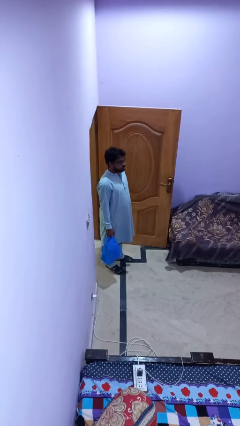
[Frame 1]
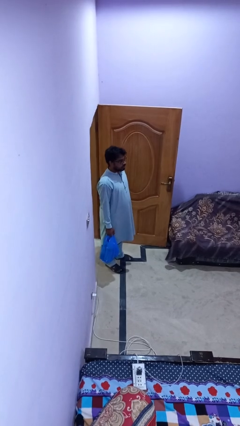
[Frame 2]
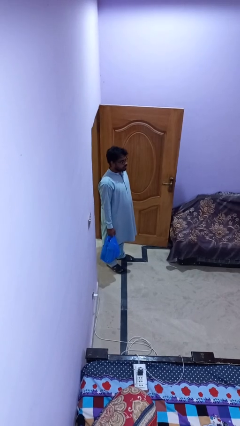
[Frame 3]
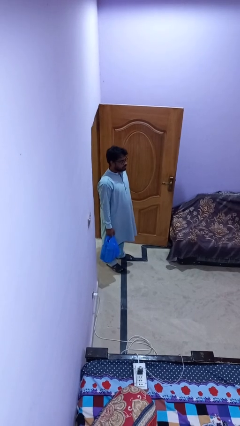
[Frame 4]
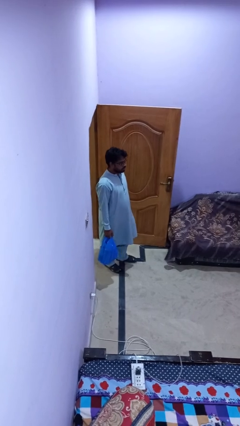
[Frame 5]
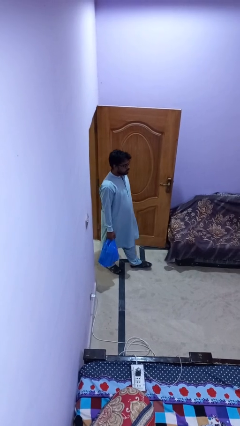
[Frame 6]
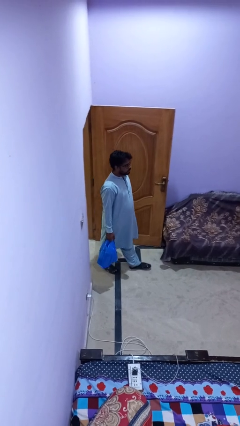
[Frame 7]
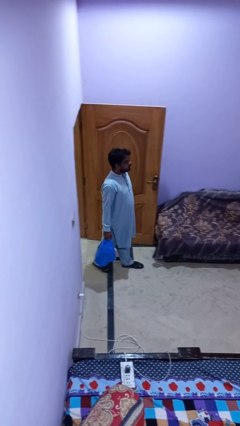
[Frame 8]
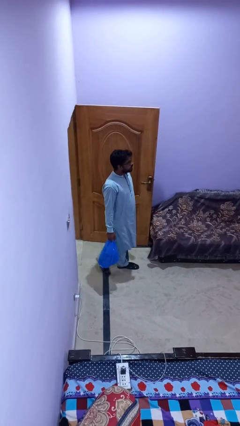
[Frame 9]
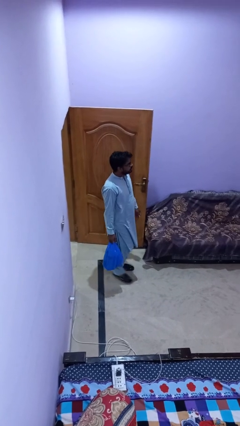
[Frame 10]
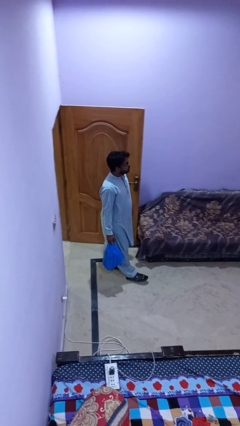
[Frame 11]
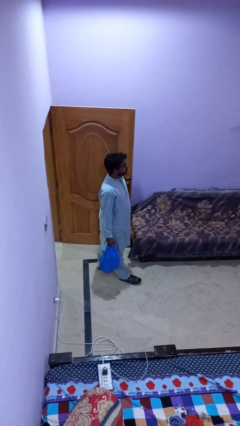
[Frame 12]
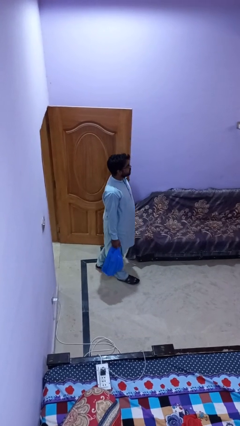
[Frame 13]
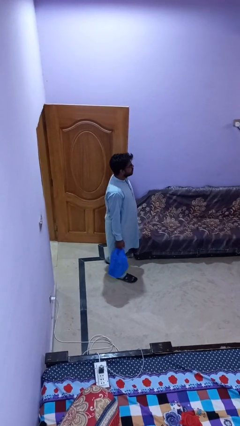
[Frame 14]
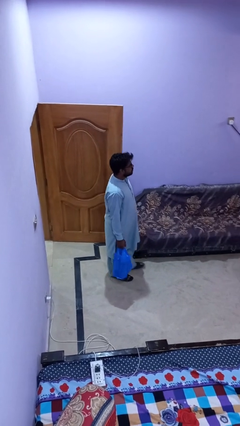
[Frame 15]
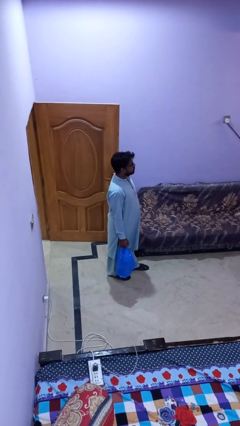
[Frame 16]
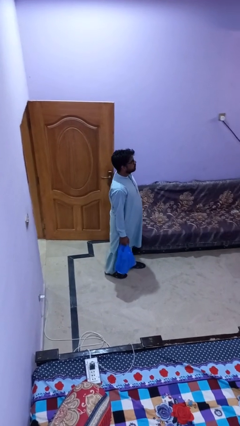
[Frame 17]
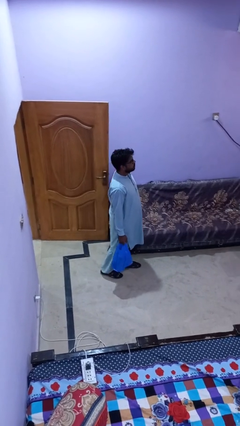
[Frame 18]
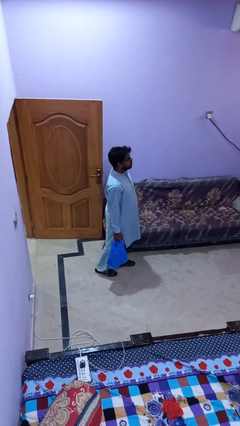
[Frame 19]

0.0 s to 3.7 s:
person carries groceries

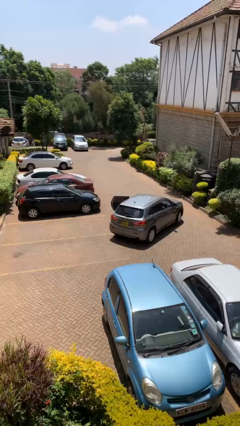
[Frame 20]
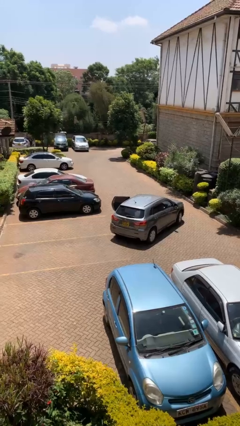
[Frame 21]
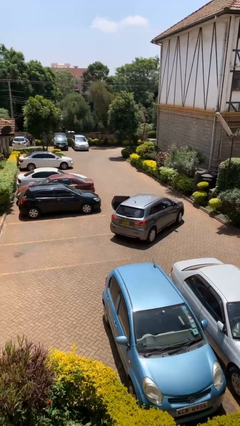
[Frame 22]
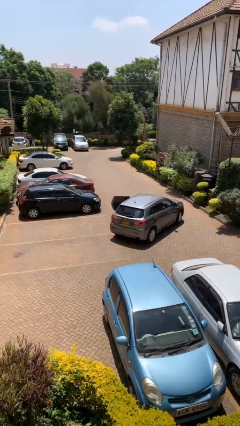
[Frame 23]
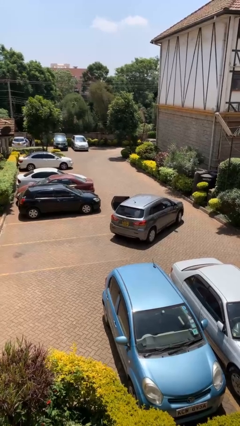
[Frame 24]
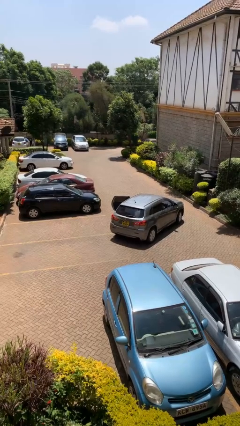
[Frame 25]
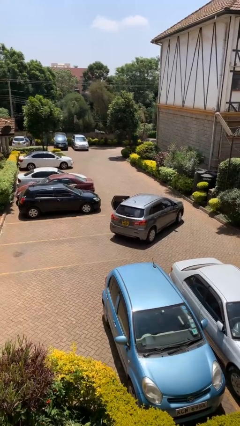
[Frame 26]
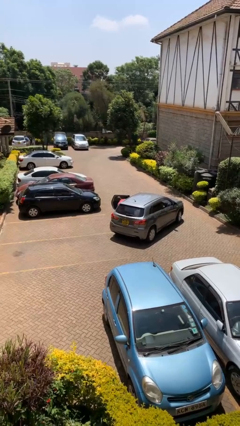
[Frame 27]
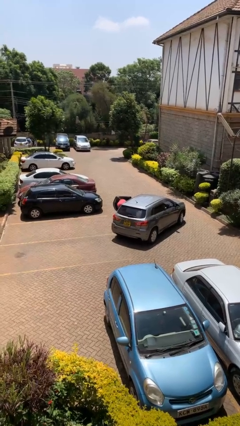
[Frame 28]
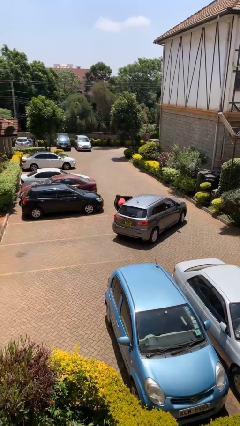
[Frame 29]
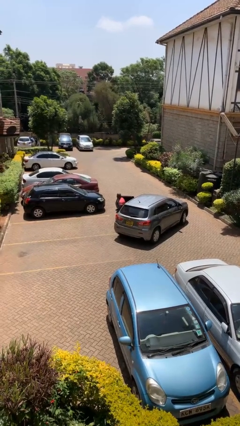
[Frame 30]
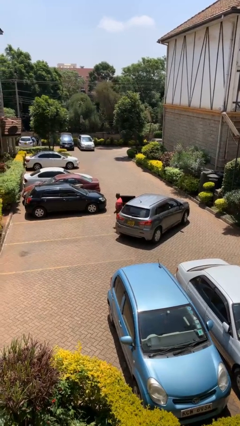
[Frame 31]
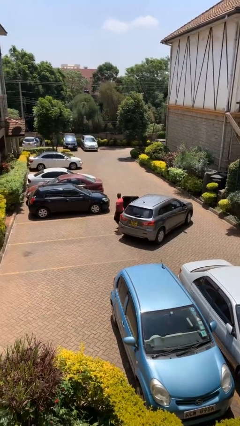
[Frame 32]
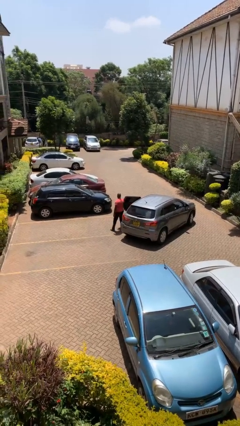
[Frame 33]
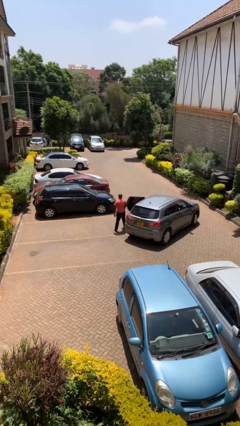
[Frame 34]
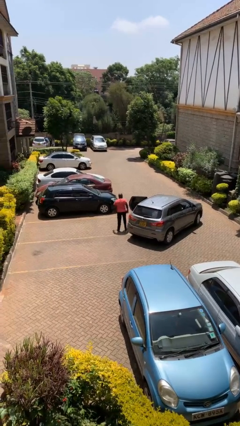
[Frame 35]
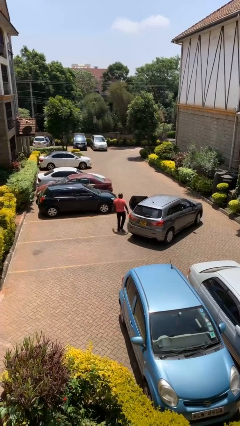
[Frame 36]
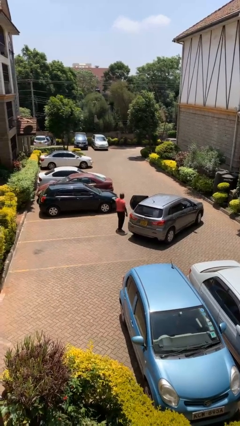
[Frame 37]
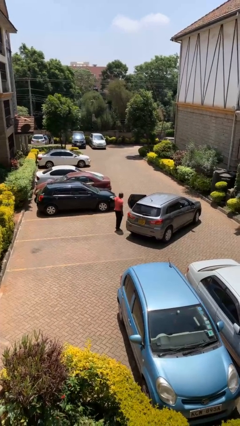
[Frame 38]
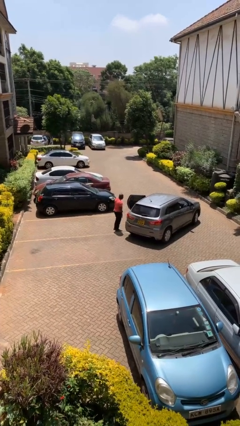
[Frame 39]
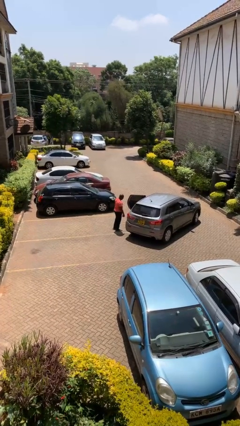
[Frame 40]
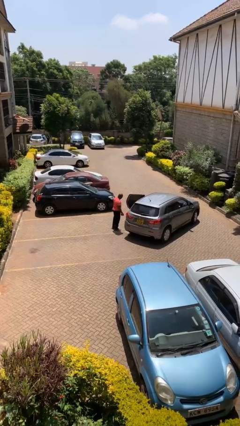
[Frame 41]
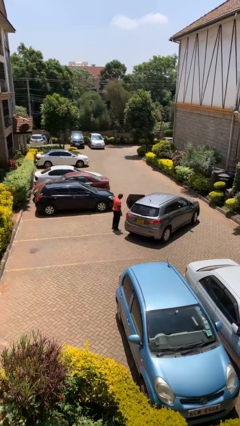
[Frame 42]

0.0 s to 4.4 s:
person exits car

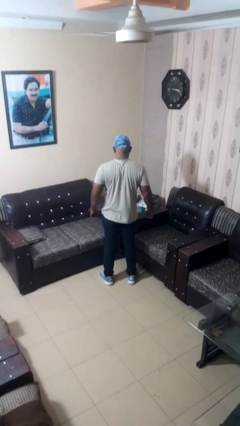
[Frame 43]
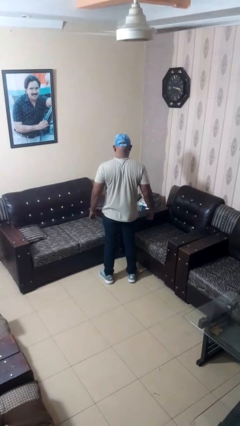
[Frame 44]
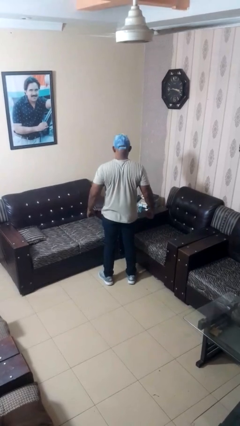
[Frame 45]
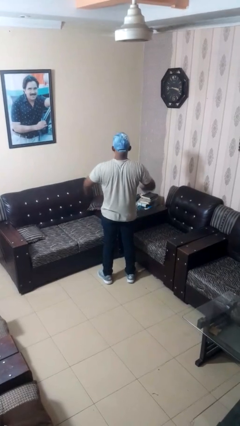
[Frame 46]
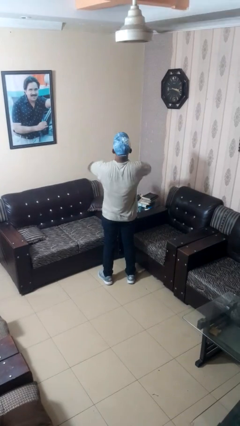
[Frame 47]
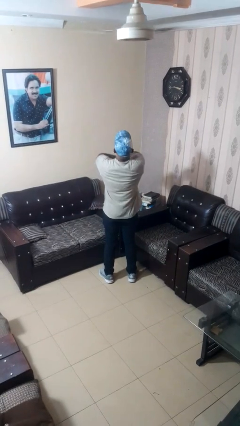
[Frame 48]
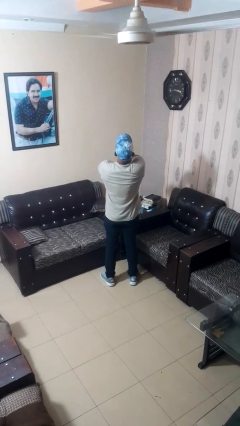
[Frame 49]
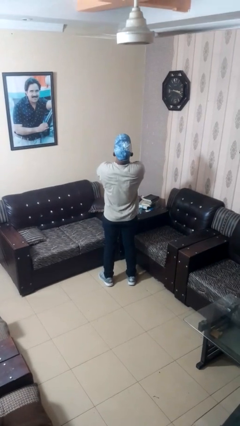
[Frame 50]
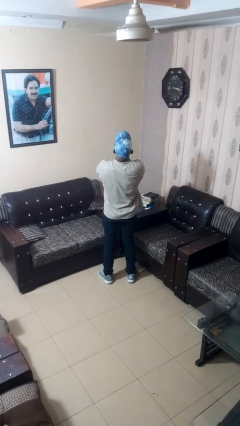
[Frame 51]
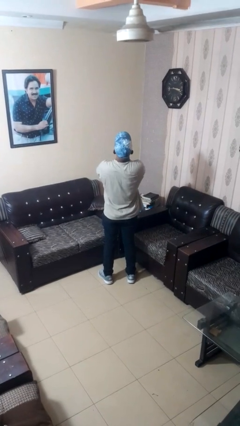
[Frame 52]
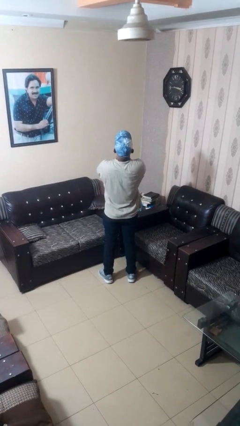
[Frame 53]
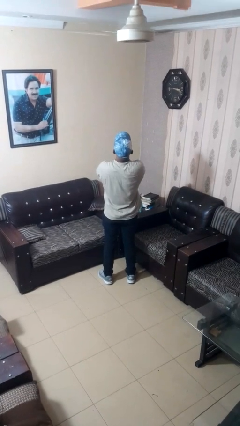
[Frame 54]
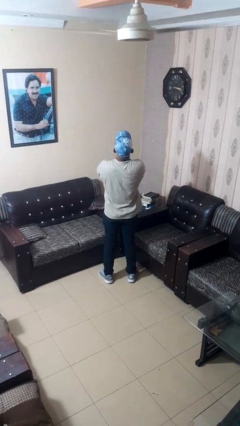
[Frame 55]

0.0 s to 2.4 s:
person crosses arms

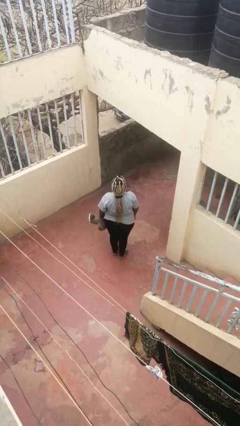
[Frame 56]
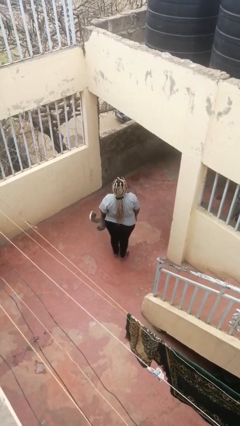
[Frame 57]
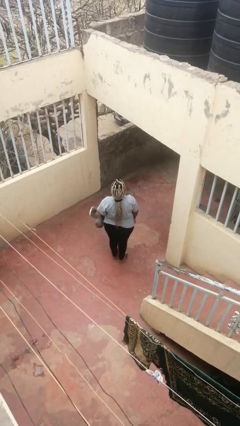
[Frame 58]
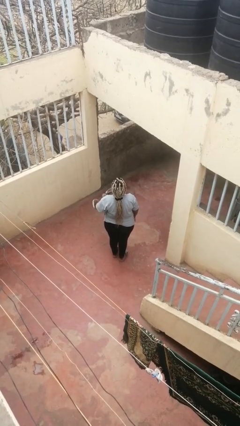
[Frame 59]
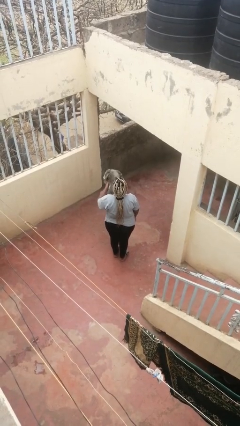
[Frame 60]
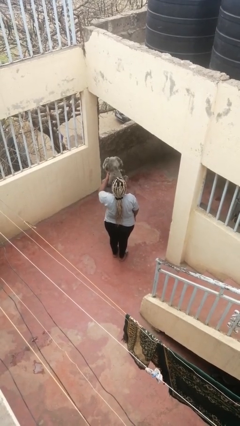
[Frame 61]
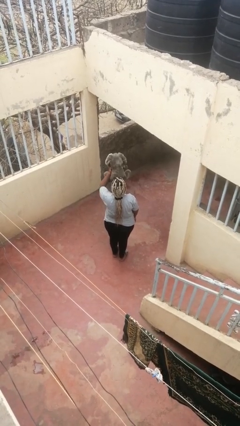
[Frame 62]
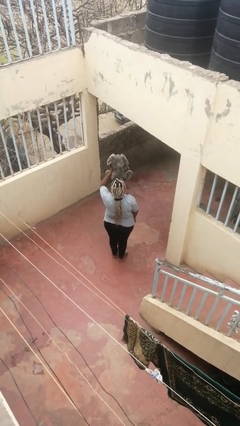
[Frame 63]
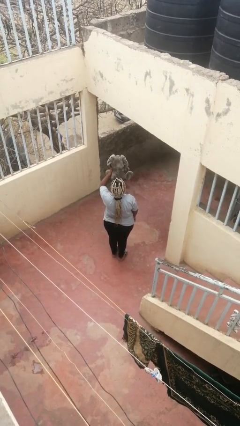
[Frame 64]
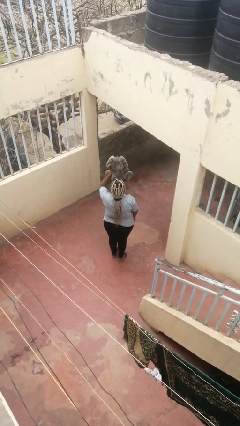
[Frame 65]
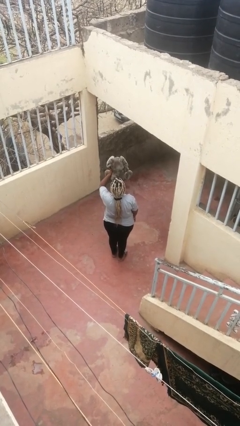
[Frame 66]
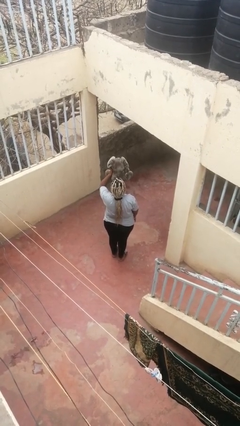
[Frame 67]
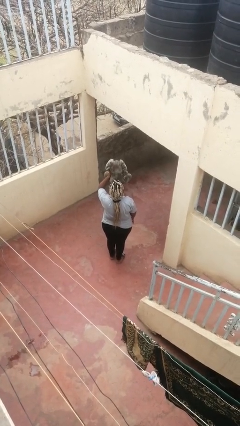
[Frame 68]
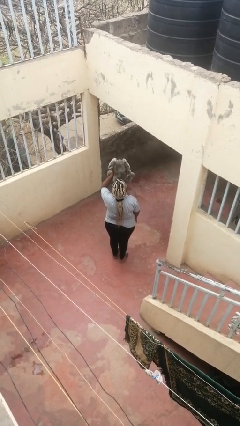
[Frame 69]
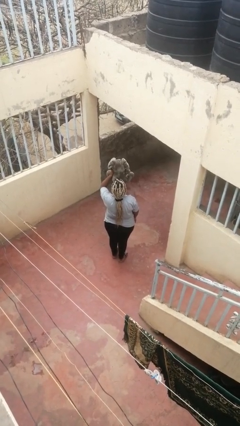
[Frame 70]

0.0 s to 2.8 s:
person holds object above head

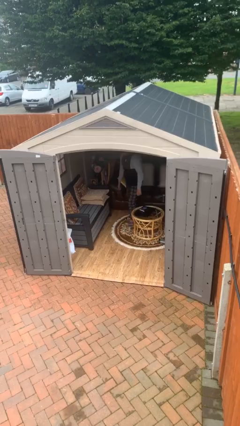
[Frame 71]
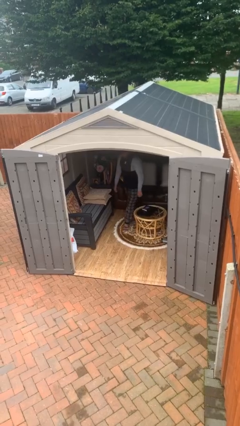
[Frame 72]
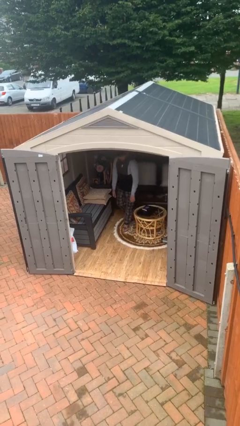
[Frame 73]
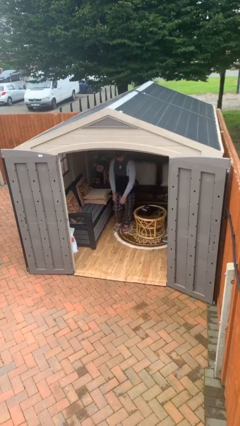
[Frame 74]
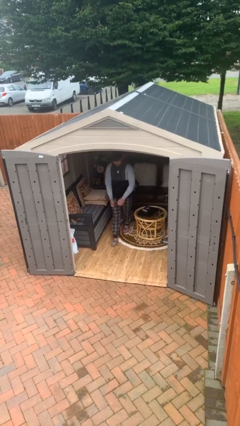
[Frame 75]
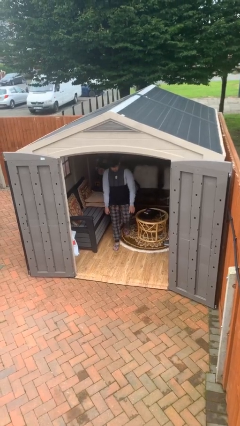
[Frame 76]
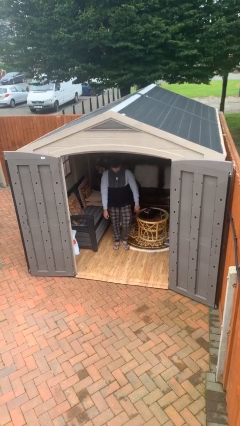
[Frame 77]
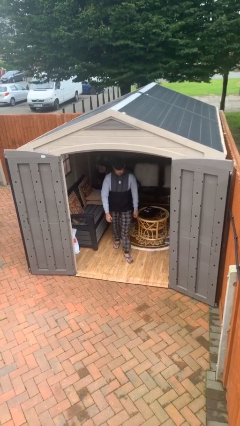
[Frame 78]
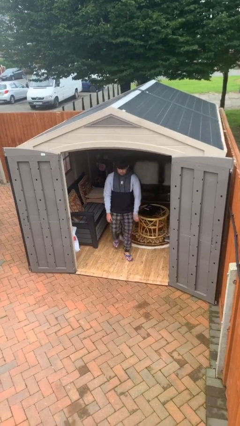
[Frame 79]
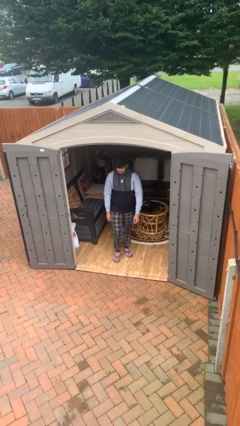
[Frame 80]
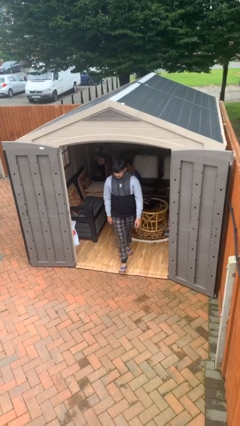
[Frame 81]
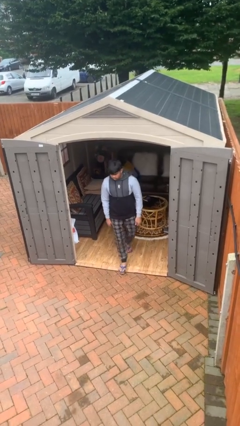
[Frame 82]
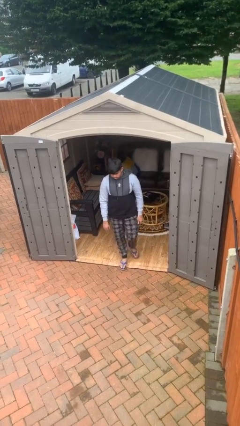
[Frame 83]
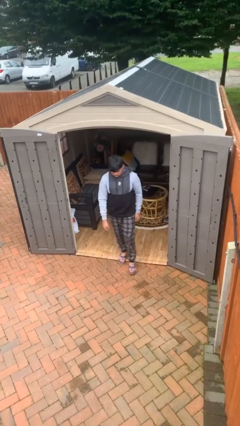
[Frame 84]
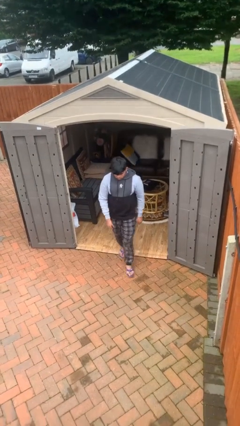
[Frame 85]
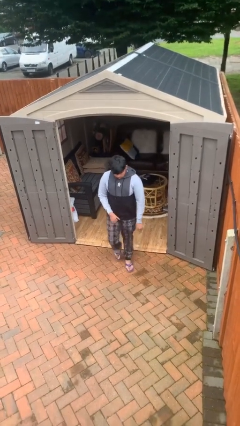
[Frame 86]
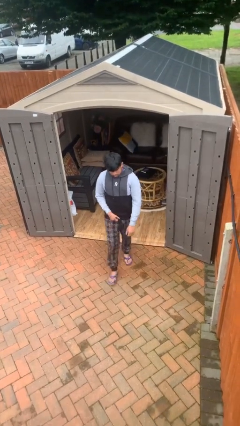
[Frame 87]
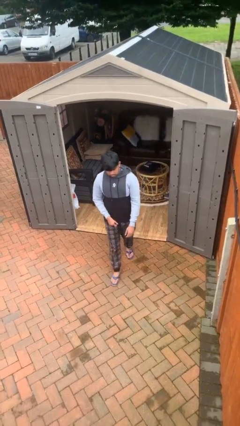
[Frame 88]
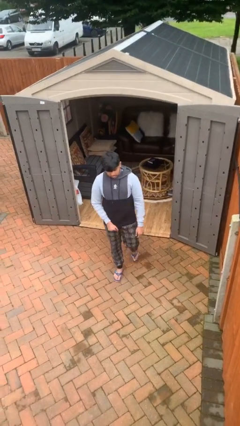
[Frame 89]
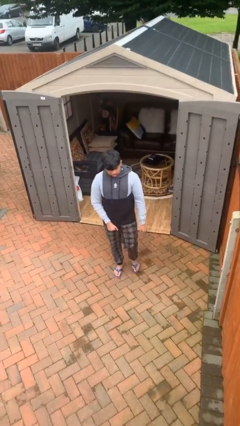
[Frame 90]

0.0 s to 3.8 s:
person enters scene through structure
